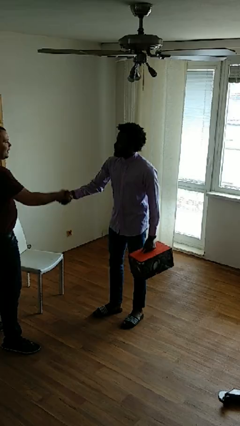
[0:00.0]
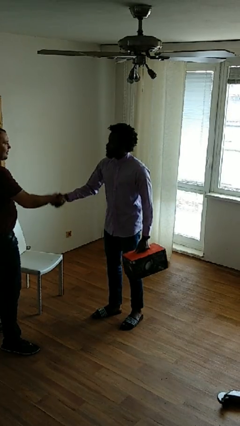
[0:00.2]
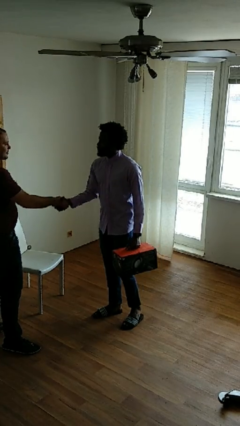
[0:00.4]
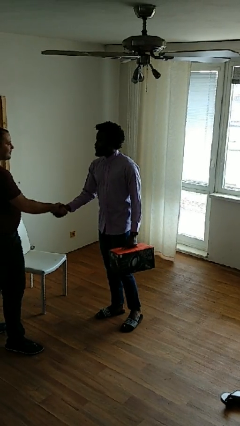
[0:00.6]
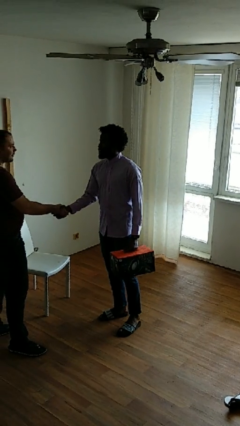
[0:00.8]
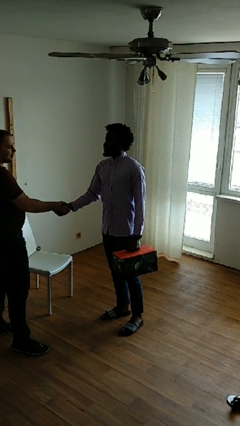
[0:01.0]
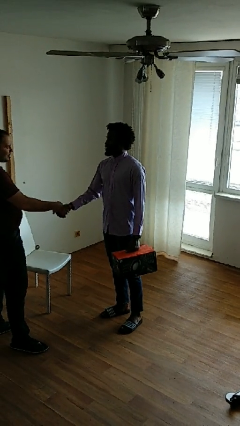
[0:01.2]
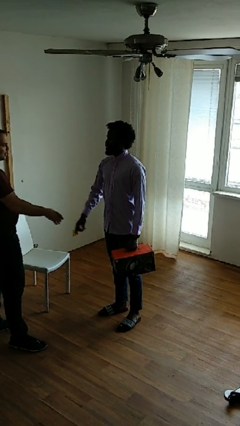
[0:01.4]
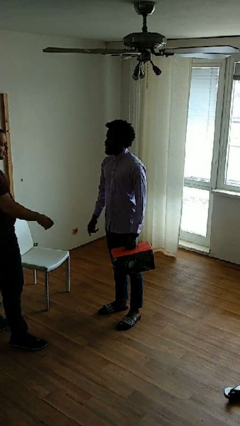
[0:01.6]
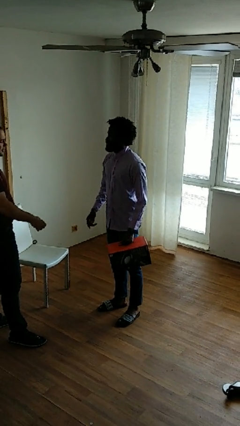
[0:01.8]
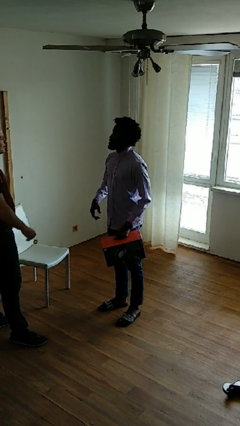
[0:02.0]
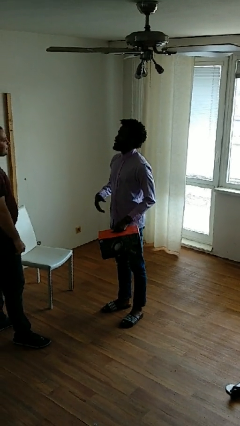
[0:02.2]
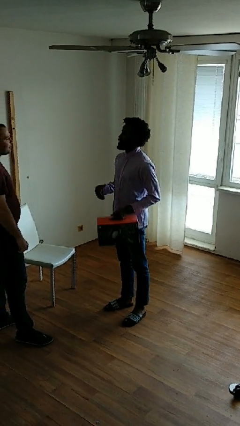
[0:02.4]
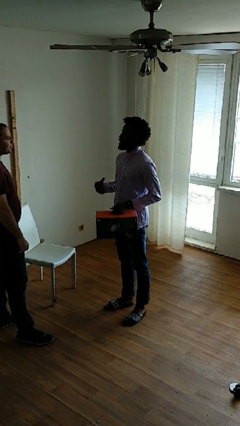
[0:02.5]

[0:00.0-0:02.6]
person highfives hand

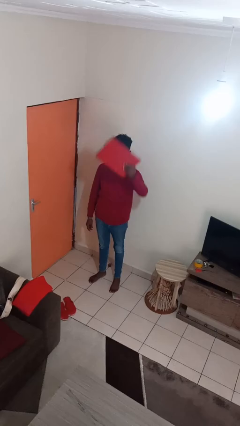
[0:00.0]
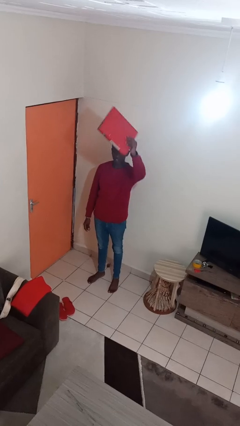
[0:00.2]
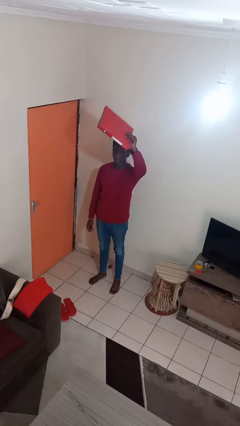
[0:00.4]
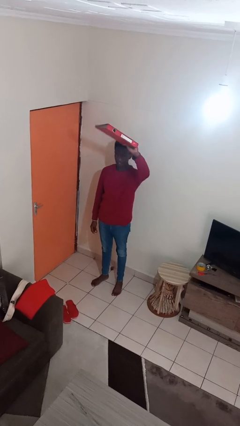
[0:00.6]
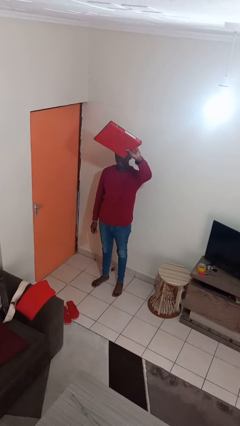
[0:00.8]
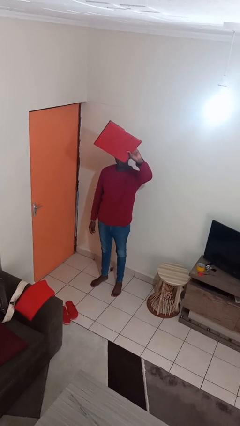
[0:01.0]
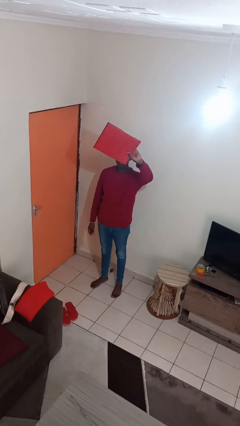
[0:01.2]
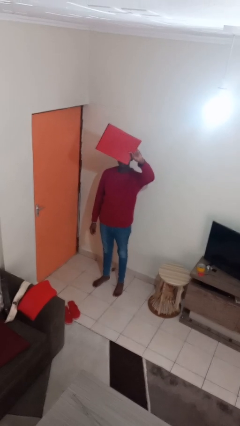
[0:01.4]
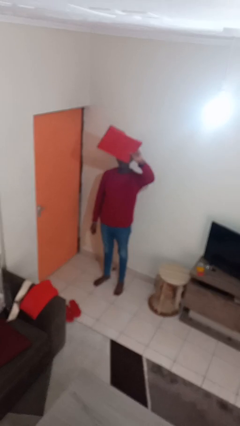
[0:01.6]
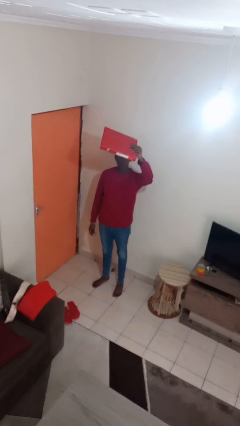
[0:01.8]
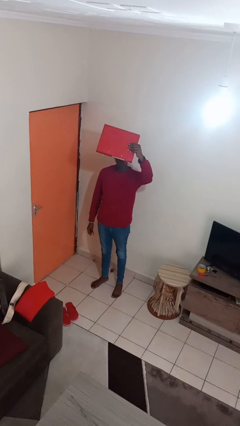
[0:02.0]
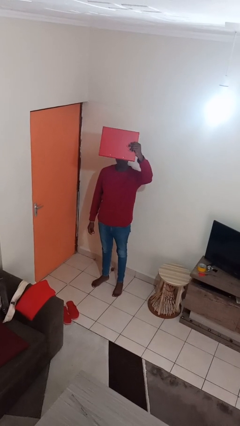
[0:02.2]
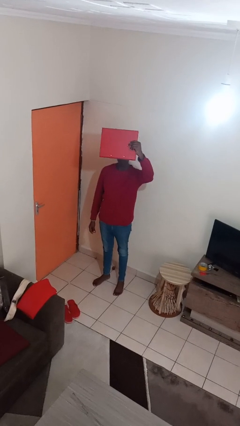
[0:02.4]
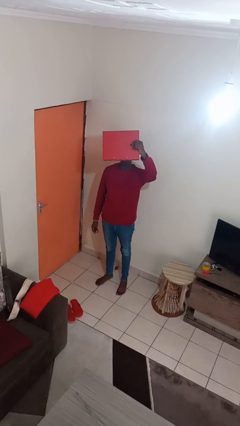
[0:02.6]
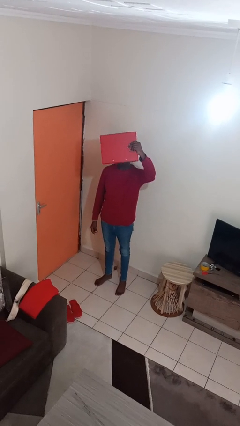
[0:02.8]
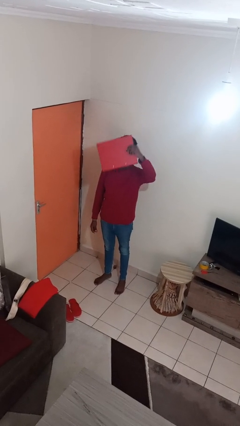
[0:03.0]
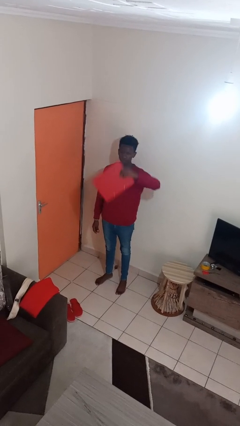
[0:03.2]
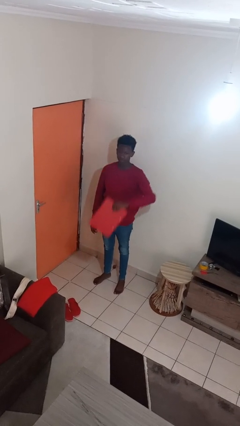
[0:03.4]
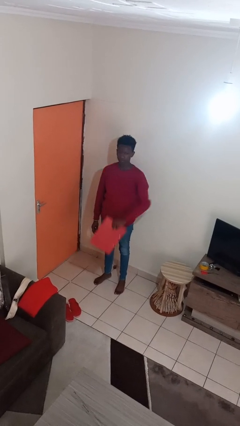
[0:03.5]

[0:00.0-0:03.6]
person holds object above head

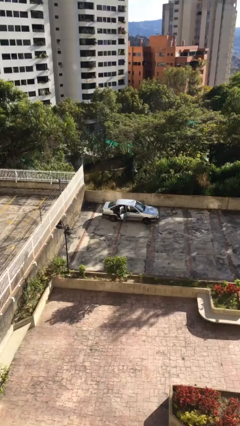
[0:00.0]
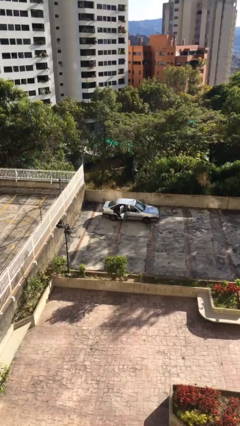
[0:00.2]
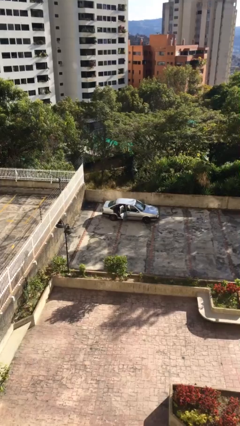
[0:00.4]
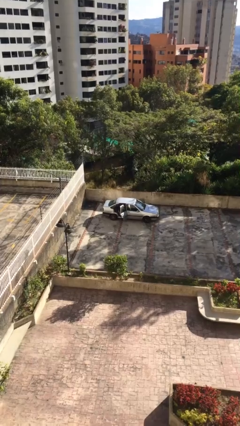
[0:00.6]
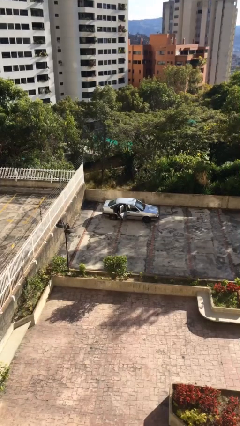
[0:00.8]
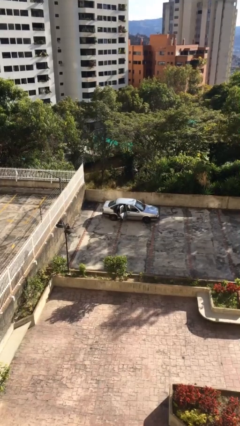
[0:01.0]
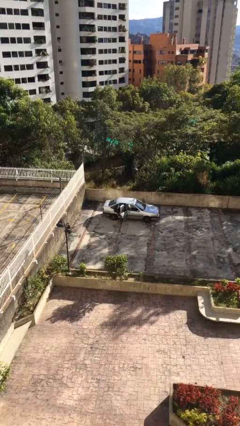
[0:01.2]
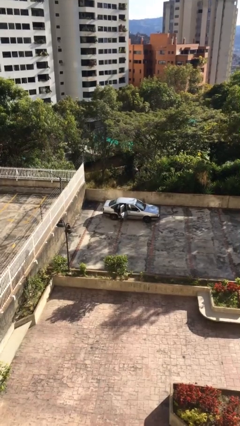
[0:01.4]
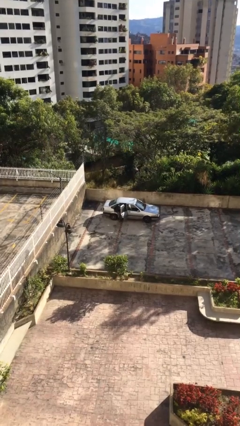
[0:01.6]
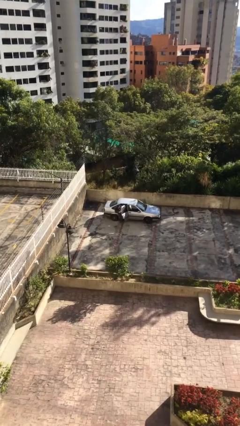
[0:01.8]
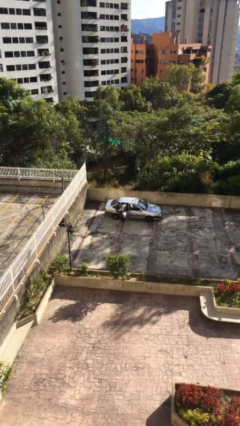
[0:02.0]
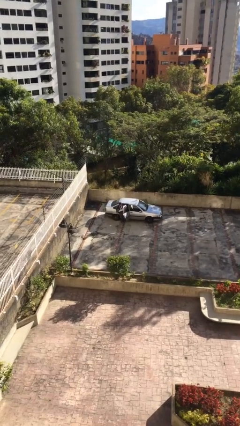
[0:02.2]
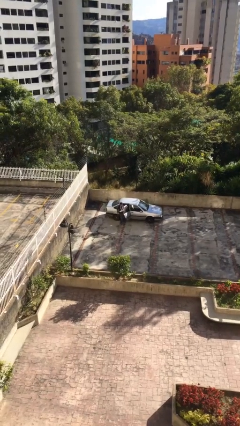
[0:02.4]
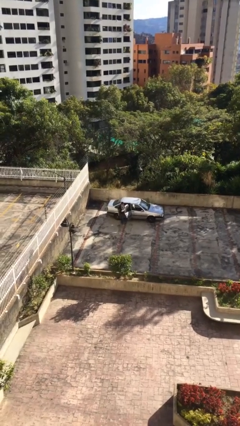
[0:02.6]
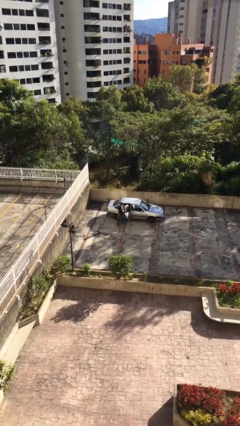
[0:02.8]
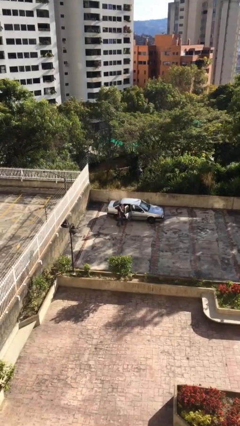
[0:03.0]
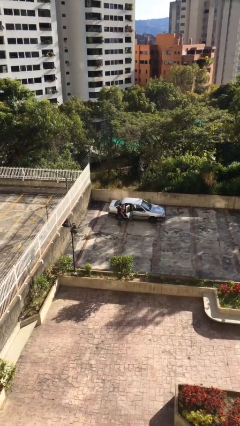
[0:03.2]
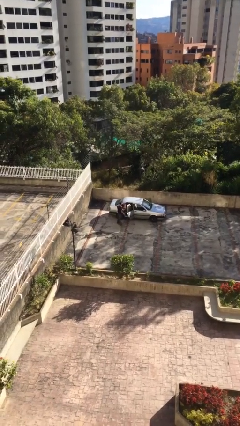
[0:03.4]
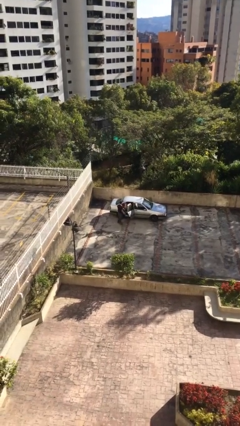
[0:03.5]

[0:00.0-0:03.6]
person exits car

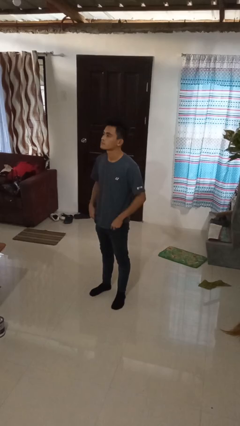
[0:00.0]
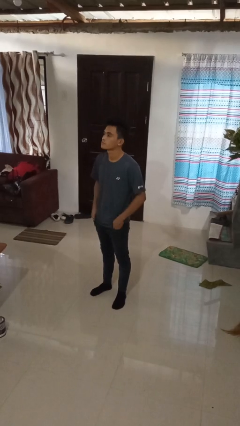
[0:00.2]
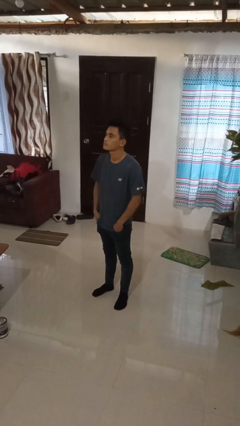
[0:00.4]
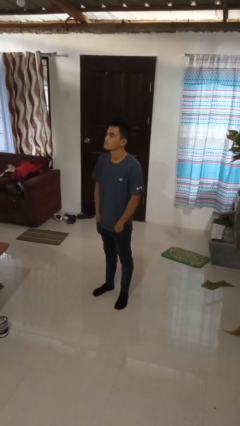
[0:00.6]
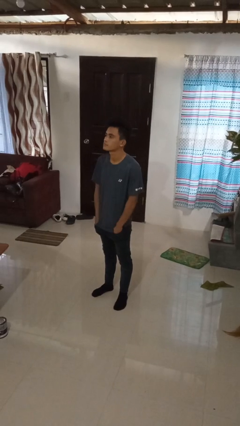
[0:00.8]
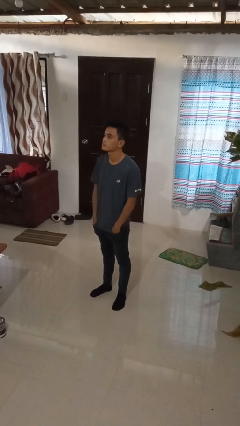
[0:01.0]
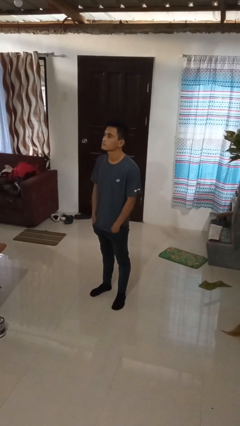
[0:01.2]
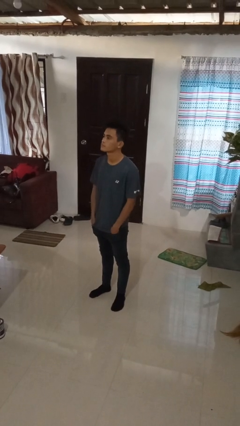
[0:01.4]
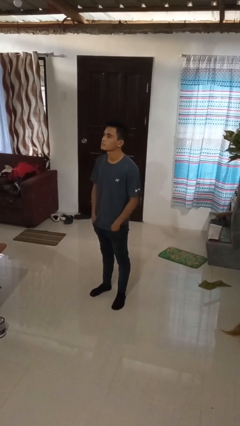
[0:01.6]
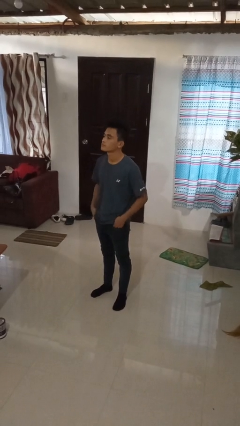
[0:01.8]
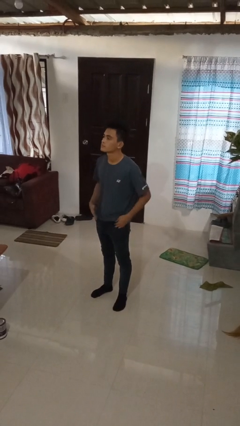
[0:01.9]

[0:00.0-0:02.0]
person puts hands in back pockets

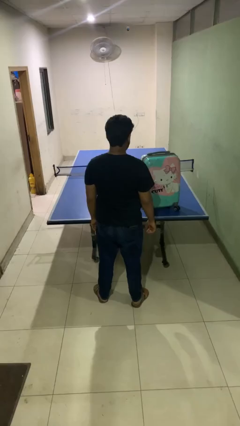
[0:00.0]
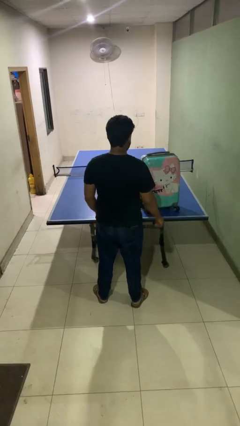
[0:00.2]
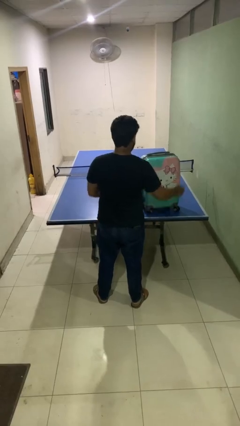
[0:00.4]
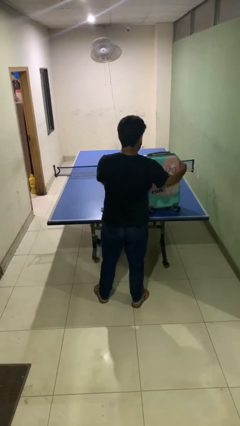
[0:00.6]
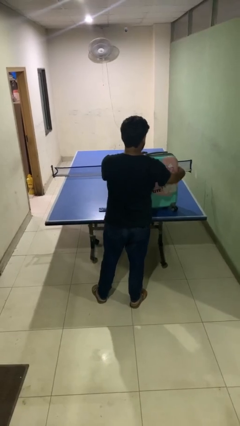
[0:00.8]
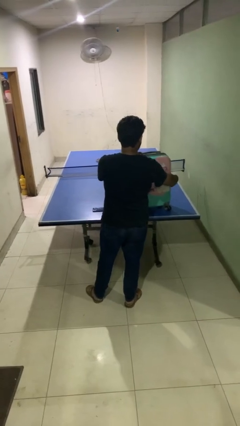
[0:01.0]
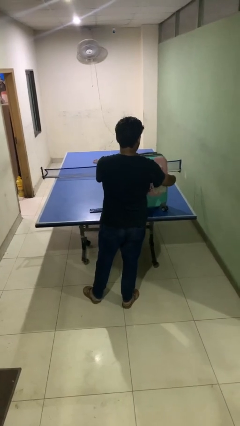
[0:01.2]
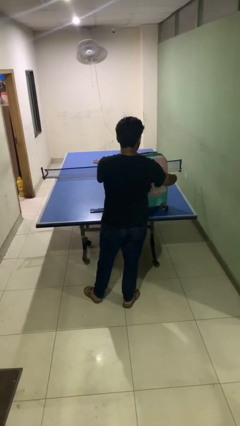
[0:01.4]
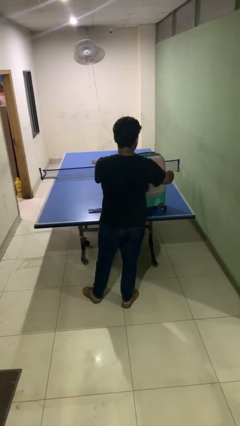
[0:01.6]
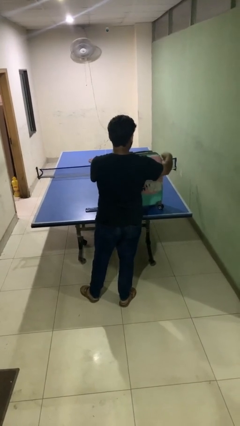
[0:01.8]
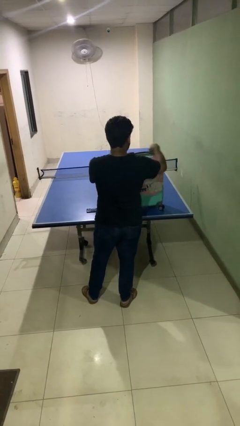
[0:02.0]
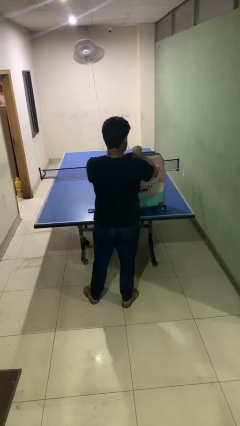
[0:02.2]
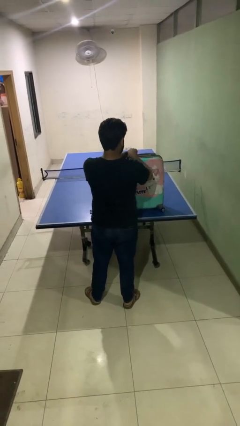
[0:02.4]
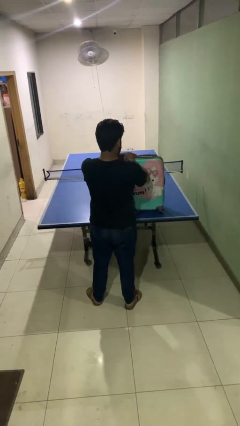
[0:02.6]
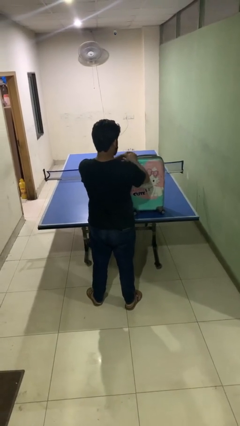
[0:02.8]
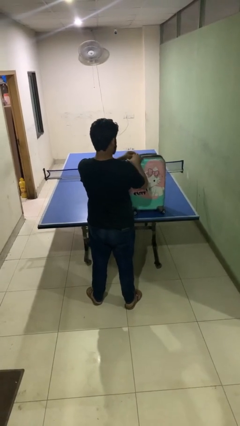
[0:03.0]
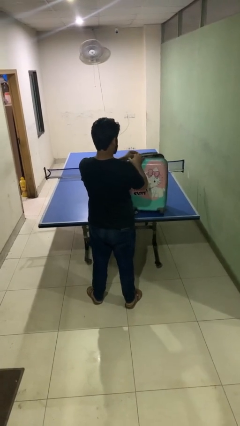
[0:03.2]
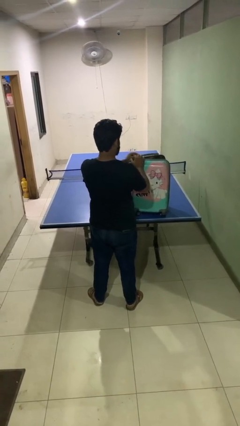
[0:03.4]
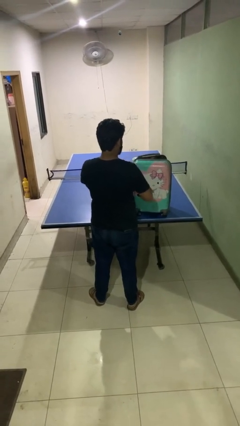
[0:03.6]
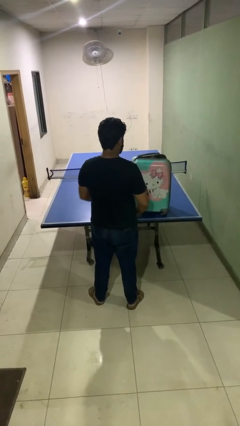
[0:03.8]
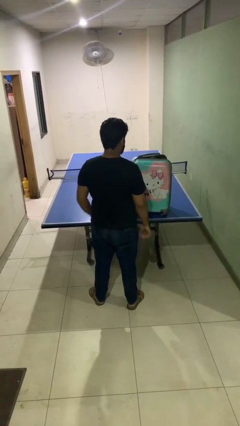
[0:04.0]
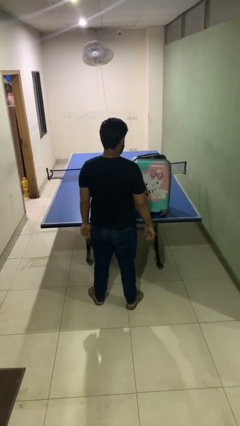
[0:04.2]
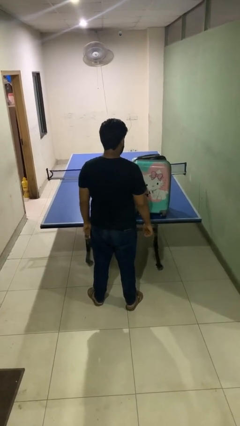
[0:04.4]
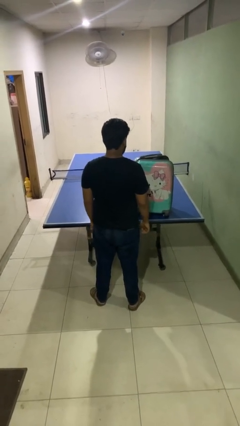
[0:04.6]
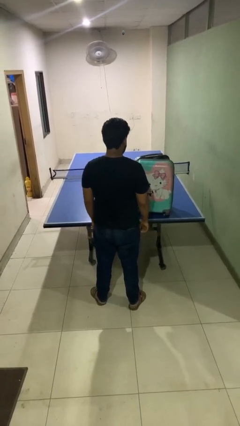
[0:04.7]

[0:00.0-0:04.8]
person opens suitcase

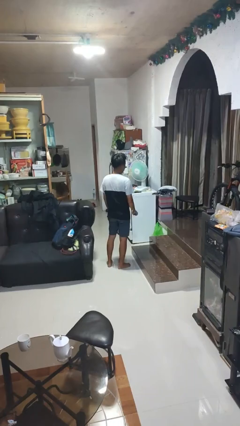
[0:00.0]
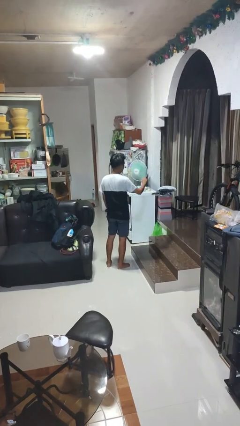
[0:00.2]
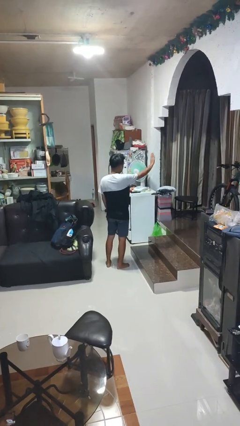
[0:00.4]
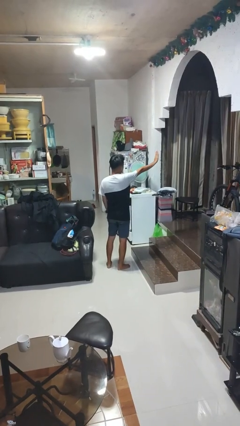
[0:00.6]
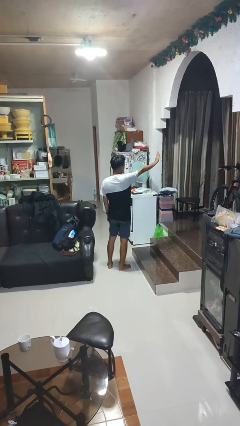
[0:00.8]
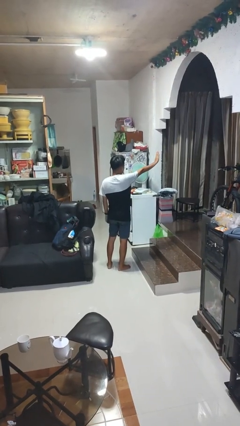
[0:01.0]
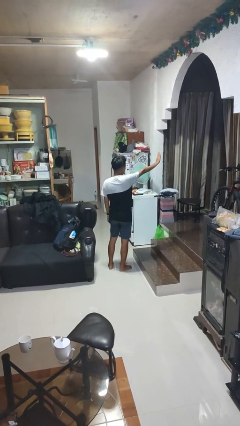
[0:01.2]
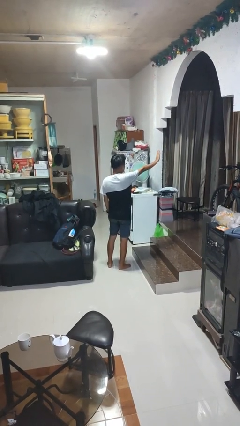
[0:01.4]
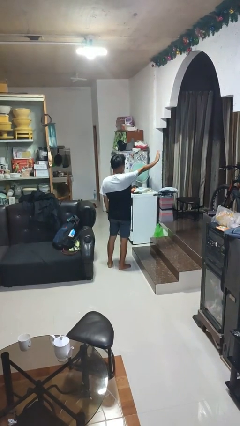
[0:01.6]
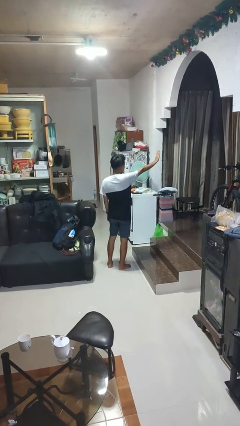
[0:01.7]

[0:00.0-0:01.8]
person gestures stop
